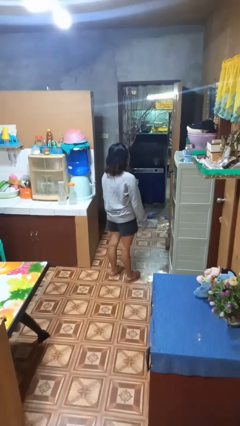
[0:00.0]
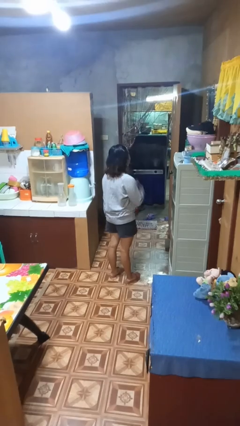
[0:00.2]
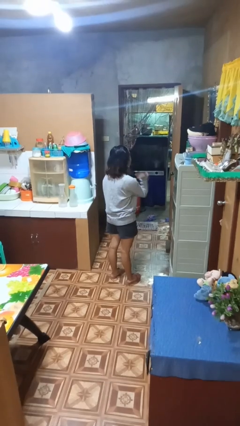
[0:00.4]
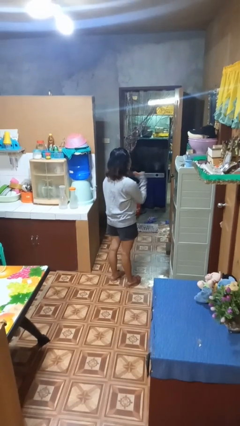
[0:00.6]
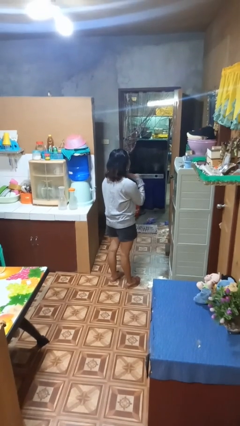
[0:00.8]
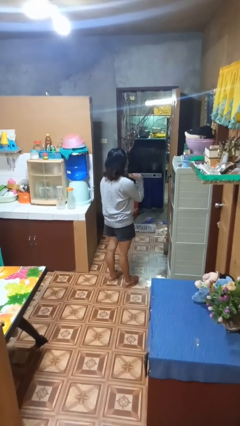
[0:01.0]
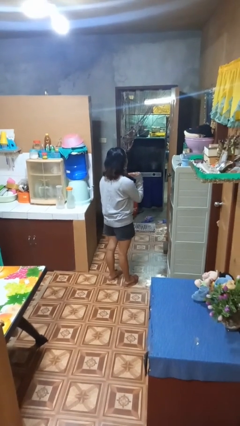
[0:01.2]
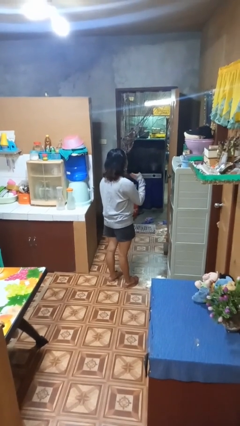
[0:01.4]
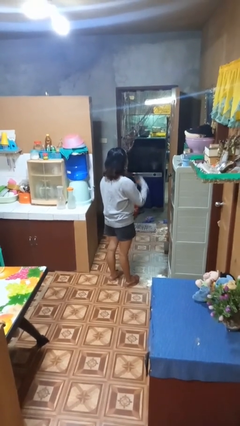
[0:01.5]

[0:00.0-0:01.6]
person gestures cut

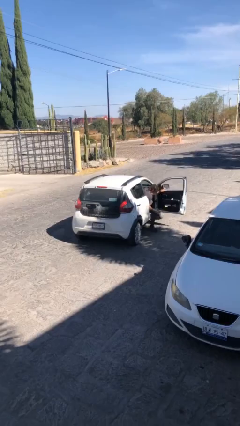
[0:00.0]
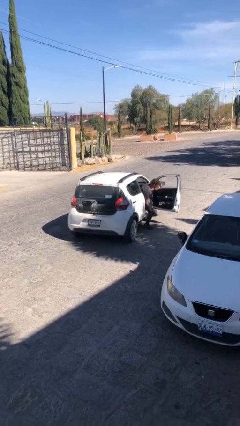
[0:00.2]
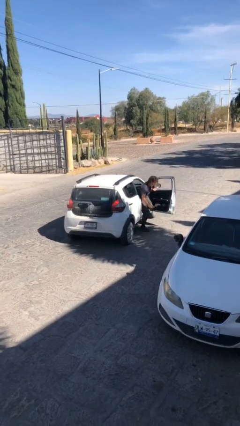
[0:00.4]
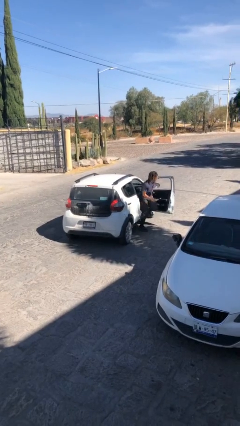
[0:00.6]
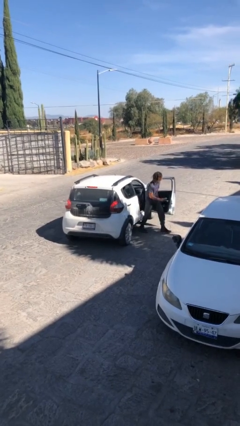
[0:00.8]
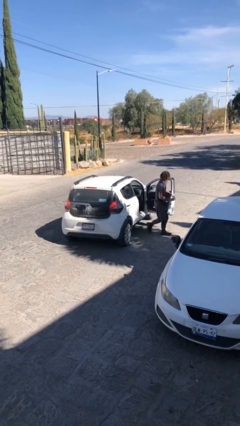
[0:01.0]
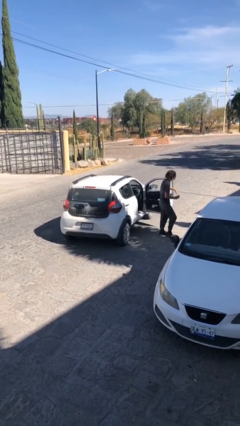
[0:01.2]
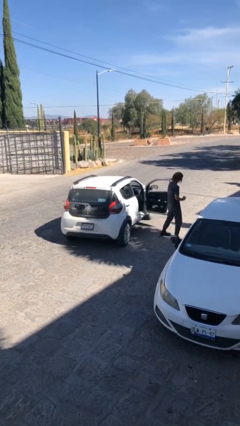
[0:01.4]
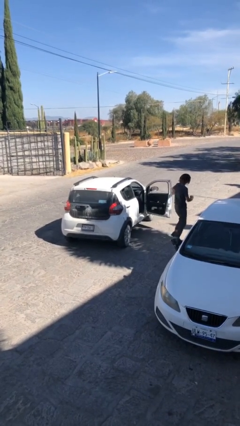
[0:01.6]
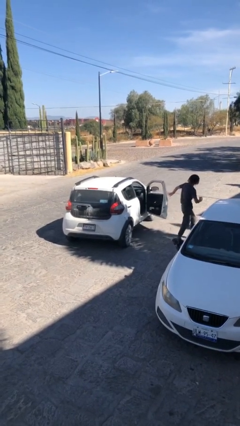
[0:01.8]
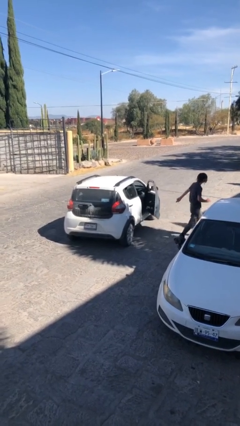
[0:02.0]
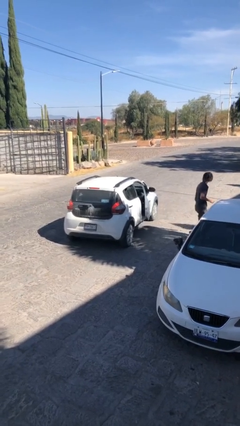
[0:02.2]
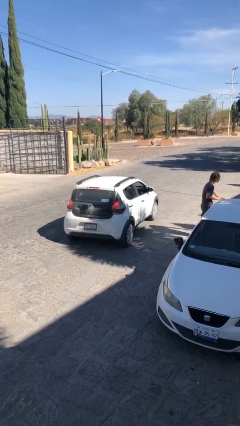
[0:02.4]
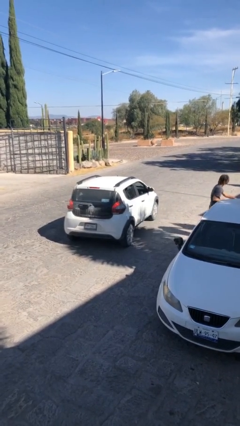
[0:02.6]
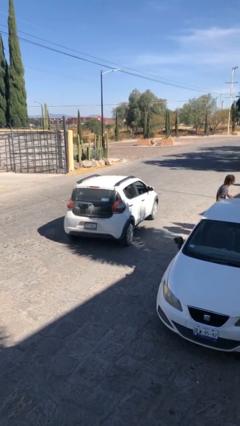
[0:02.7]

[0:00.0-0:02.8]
car drops off person

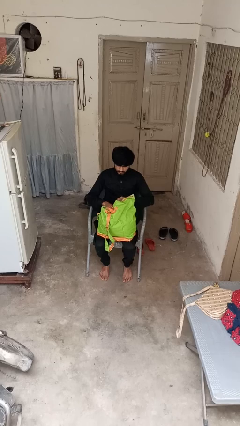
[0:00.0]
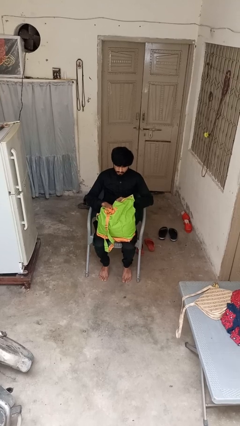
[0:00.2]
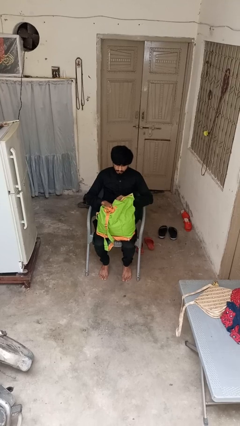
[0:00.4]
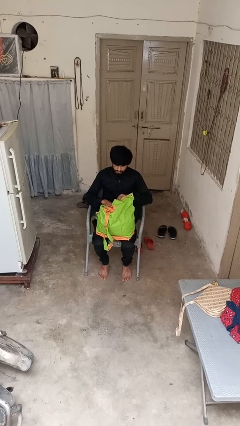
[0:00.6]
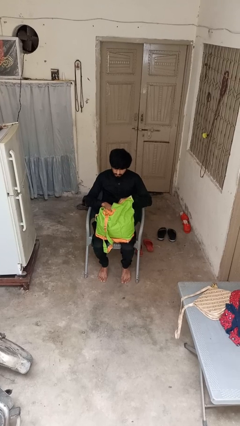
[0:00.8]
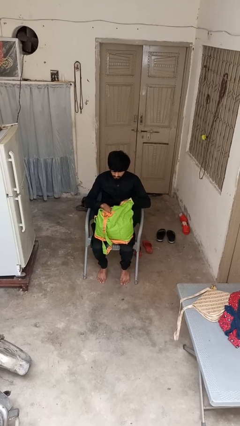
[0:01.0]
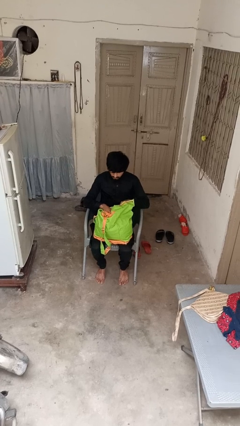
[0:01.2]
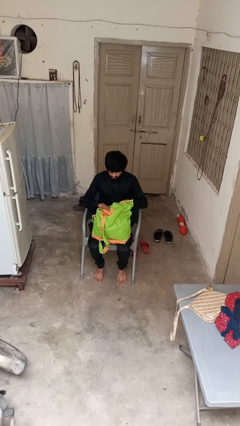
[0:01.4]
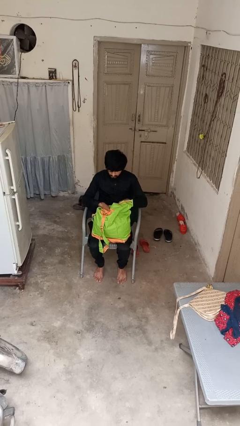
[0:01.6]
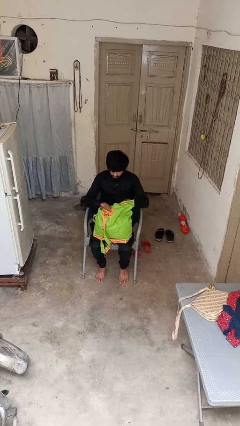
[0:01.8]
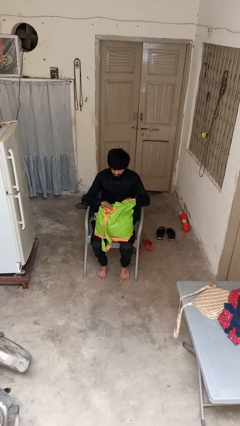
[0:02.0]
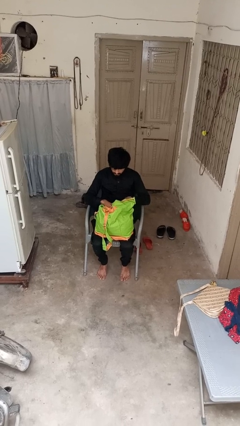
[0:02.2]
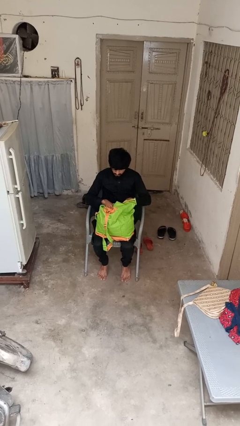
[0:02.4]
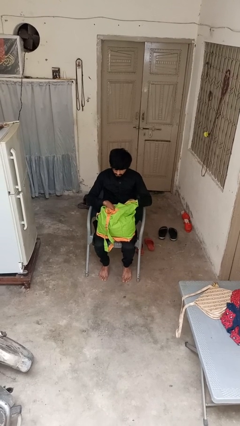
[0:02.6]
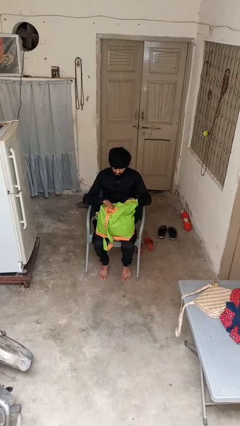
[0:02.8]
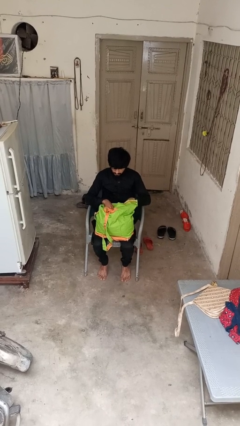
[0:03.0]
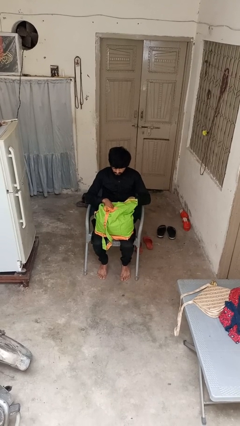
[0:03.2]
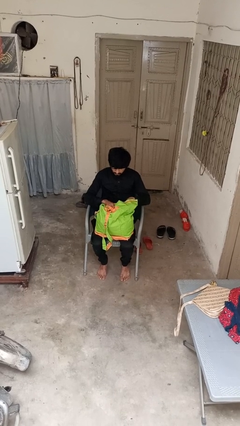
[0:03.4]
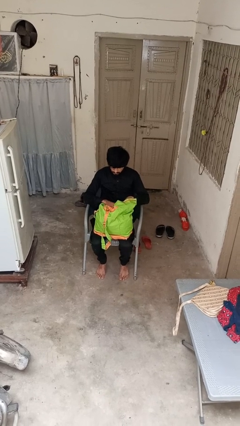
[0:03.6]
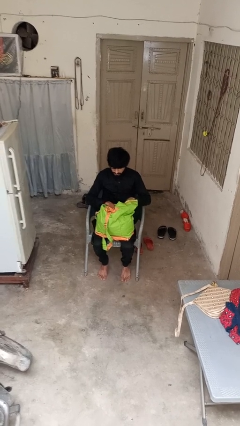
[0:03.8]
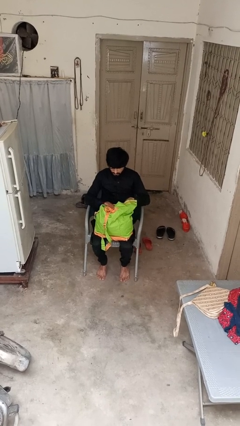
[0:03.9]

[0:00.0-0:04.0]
person searches in backpack

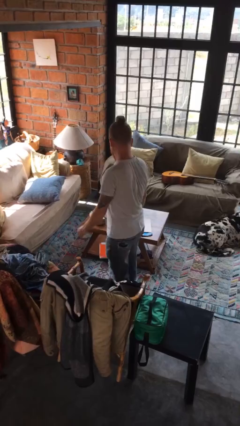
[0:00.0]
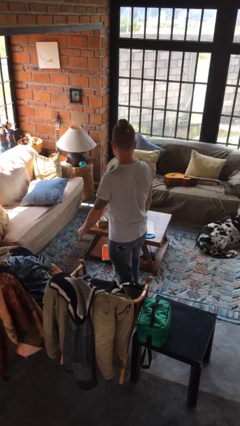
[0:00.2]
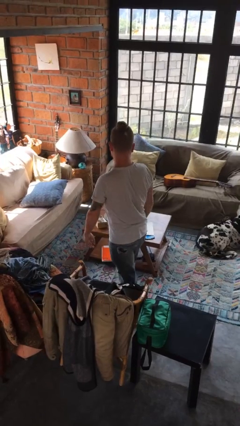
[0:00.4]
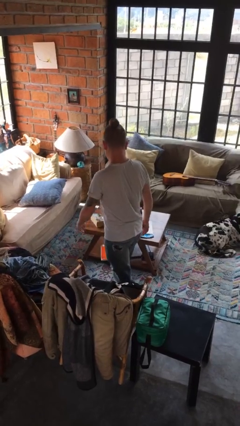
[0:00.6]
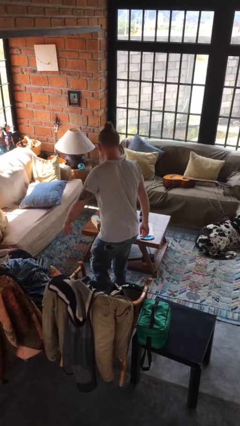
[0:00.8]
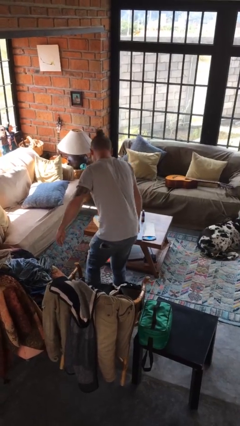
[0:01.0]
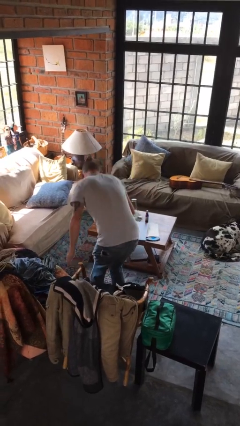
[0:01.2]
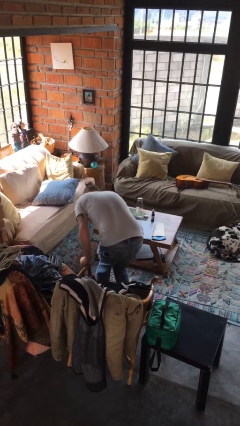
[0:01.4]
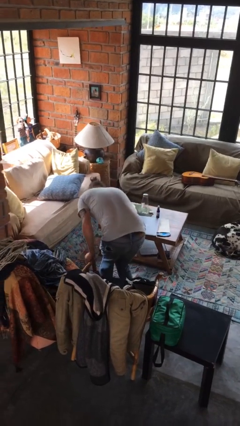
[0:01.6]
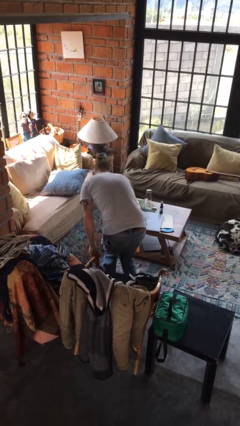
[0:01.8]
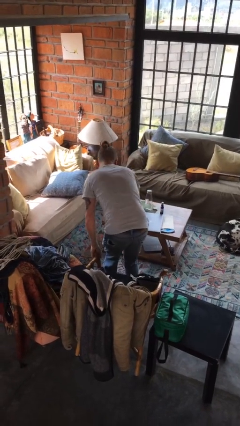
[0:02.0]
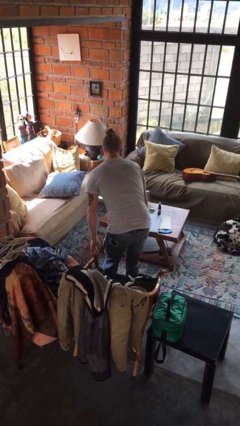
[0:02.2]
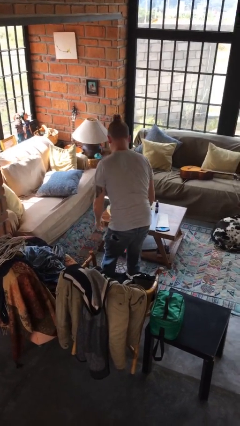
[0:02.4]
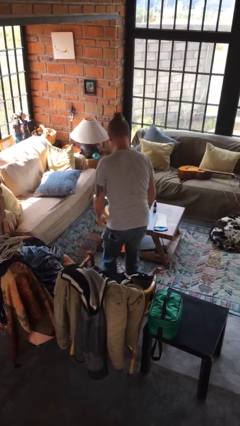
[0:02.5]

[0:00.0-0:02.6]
person stubs toe

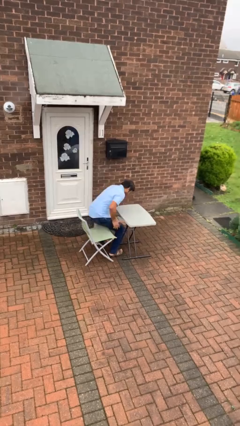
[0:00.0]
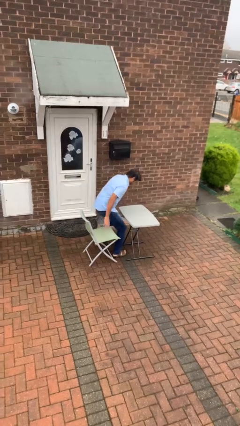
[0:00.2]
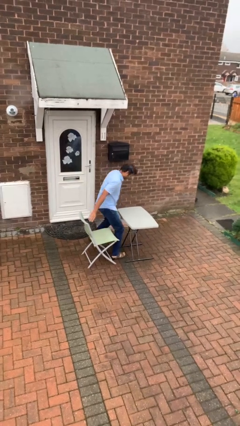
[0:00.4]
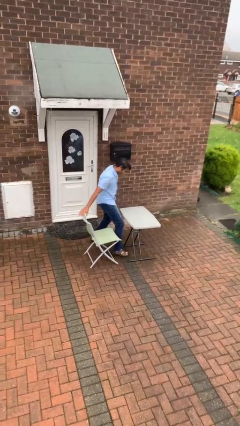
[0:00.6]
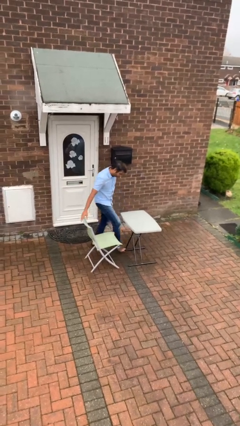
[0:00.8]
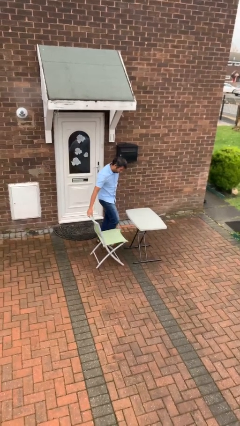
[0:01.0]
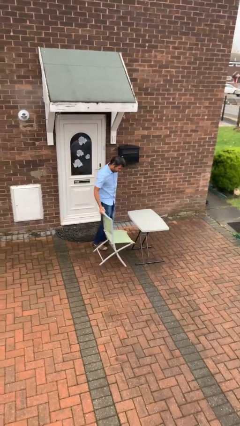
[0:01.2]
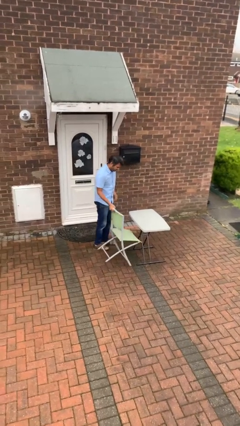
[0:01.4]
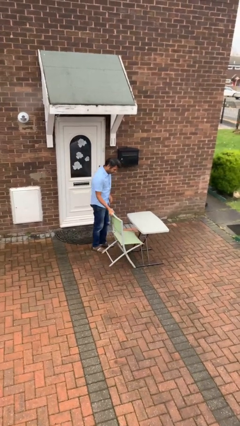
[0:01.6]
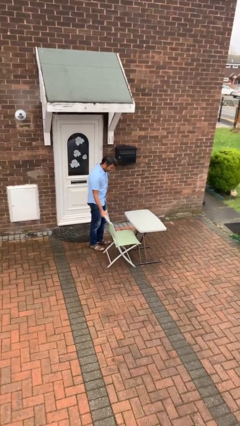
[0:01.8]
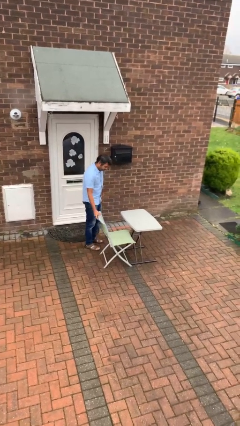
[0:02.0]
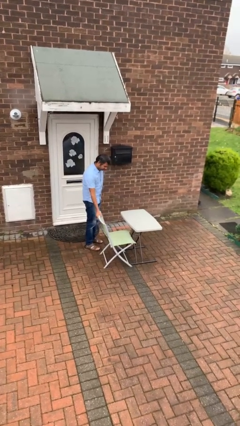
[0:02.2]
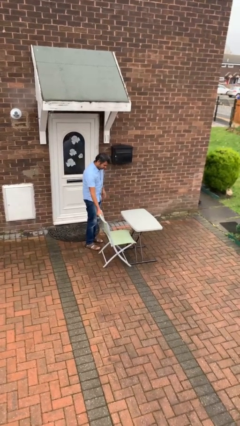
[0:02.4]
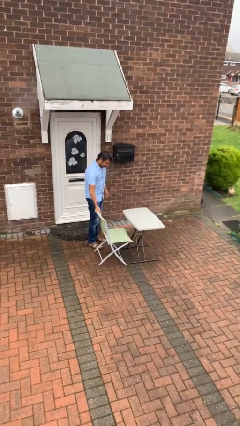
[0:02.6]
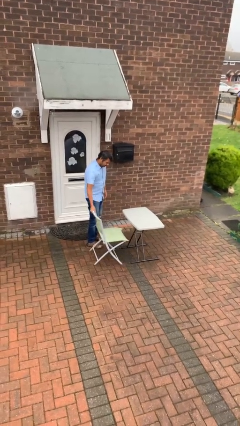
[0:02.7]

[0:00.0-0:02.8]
person stands up

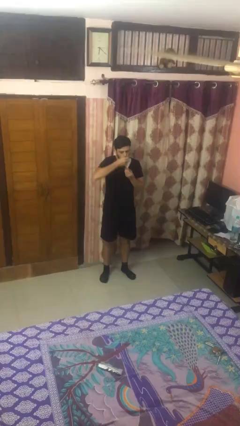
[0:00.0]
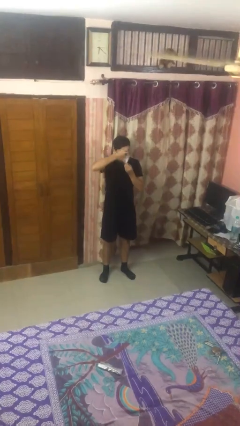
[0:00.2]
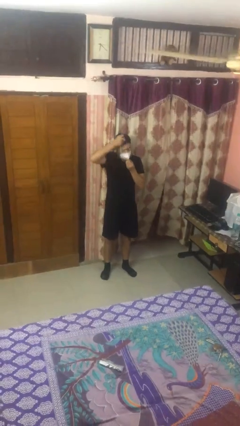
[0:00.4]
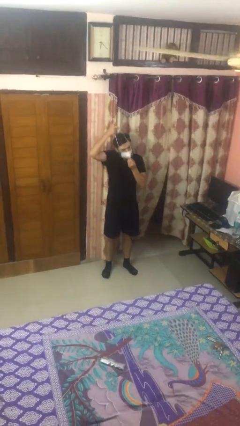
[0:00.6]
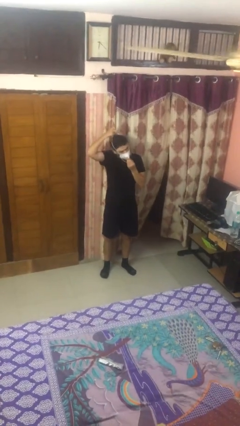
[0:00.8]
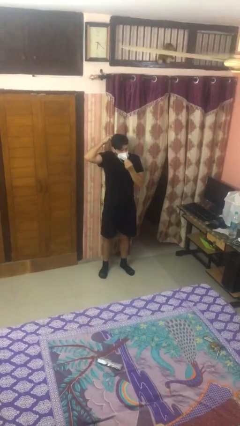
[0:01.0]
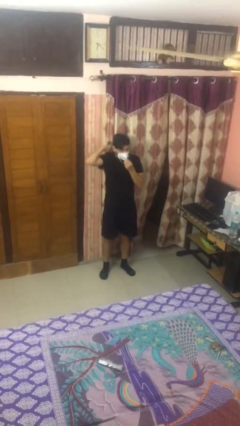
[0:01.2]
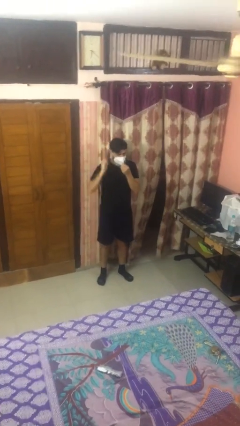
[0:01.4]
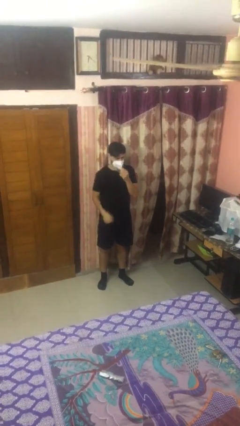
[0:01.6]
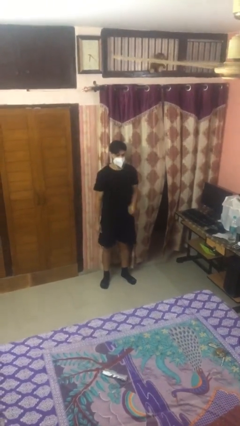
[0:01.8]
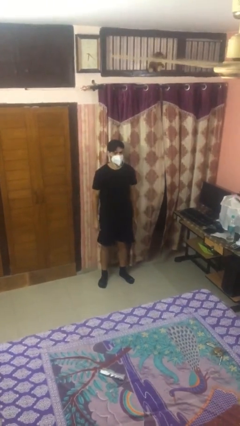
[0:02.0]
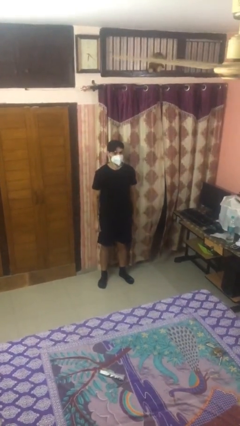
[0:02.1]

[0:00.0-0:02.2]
person puts on facemask

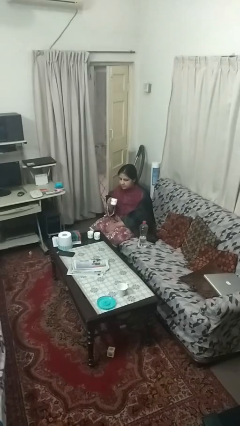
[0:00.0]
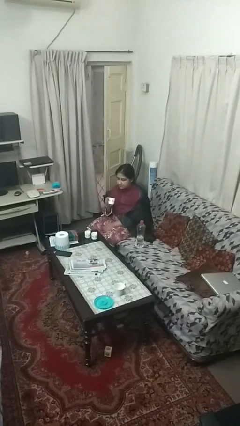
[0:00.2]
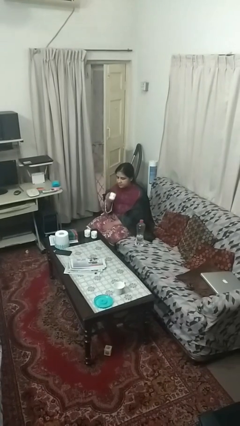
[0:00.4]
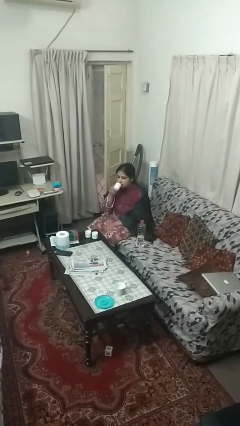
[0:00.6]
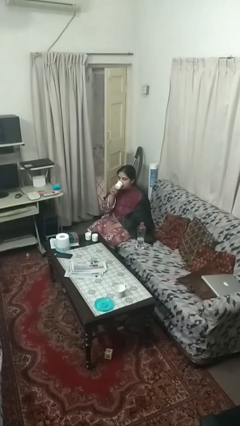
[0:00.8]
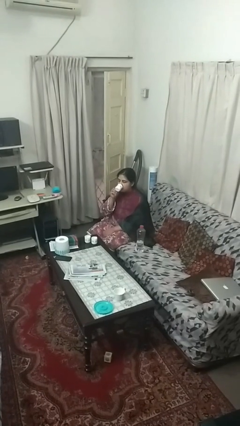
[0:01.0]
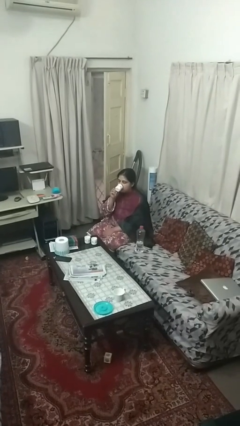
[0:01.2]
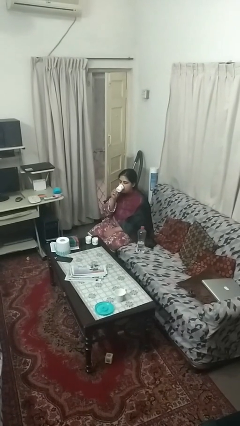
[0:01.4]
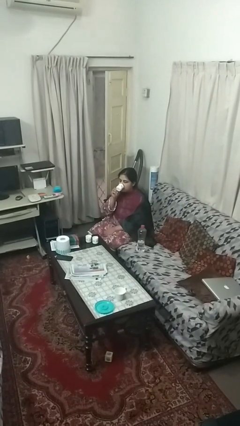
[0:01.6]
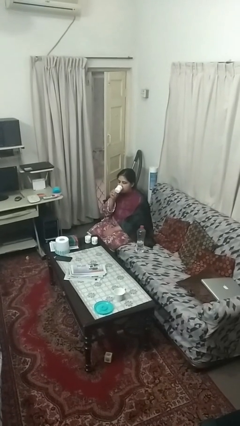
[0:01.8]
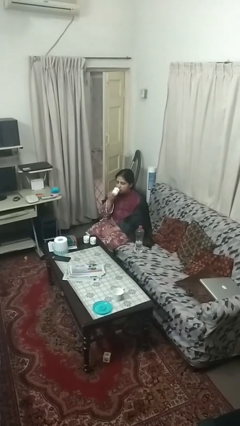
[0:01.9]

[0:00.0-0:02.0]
person drinks from shotglass
